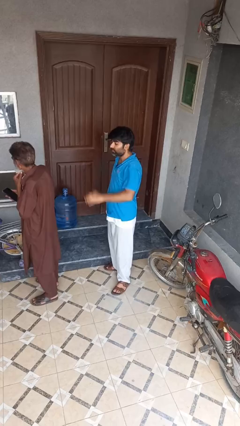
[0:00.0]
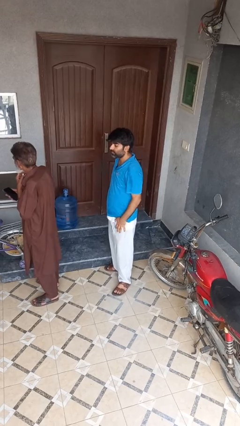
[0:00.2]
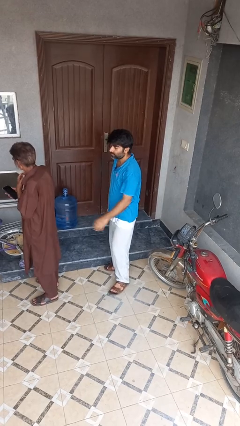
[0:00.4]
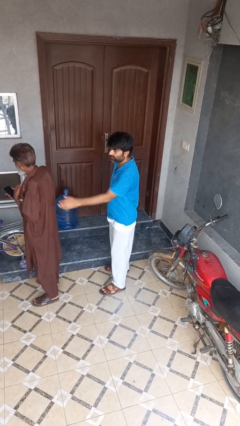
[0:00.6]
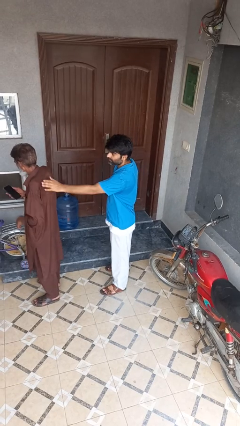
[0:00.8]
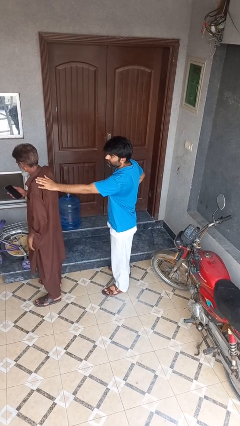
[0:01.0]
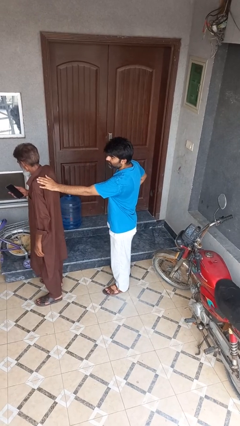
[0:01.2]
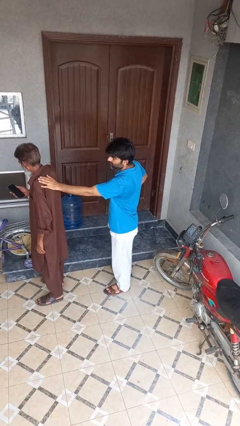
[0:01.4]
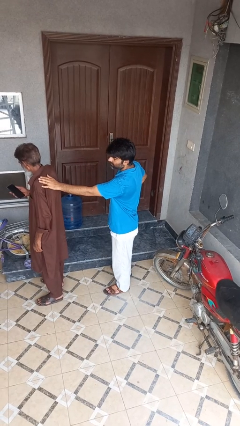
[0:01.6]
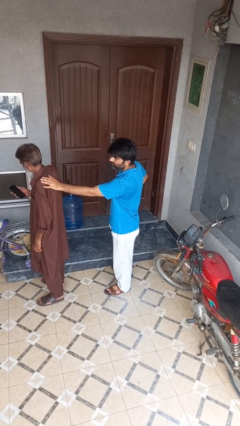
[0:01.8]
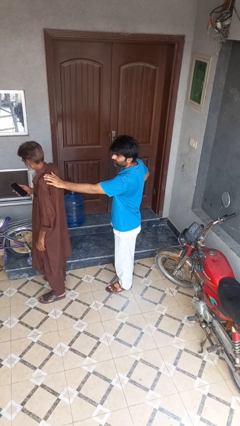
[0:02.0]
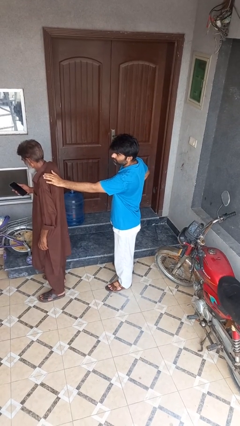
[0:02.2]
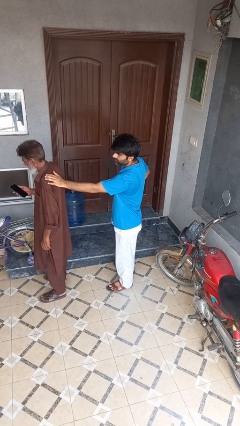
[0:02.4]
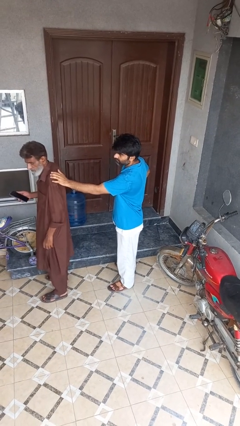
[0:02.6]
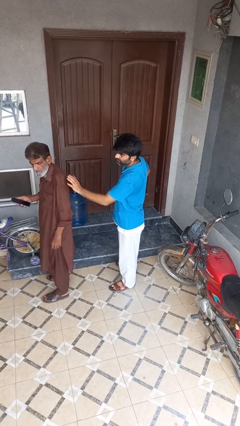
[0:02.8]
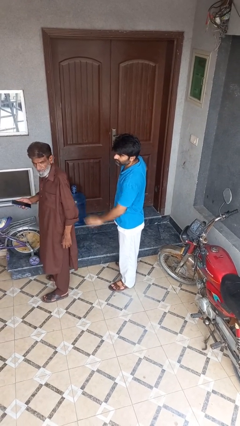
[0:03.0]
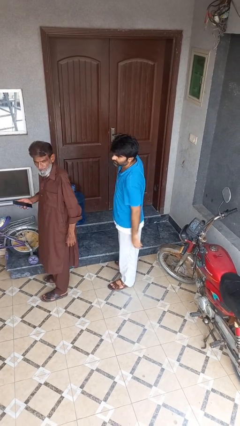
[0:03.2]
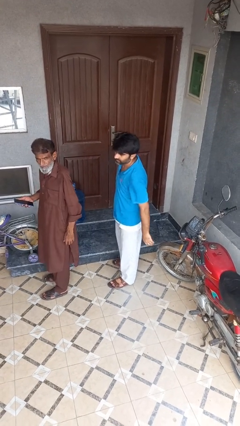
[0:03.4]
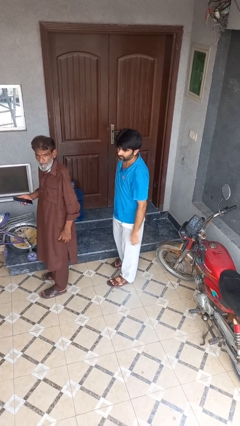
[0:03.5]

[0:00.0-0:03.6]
person touches back of person

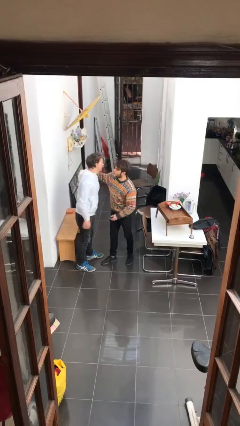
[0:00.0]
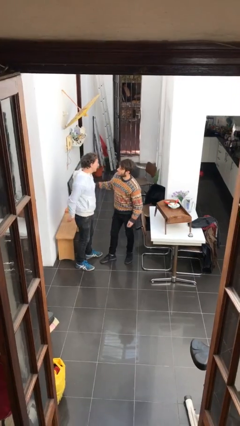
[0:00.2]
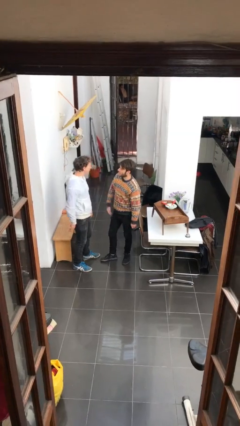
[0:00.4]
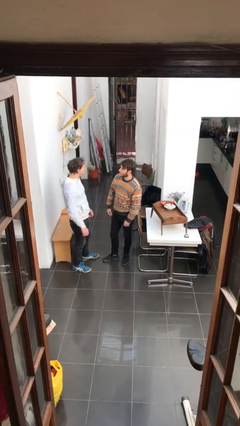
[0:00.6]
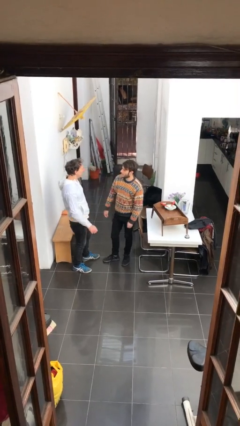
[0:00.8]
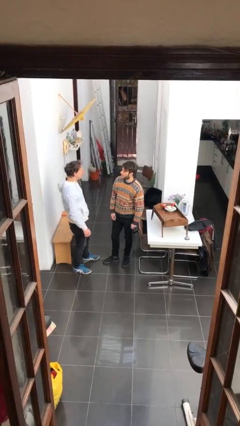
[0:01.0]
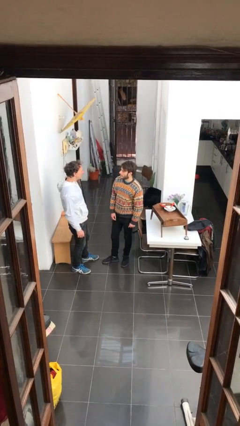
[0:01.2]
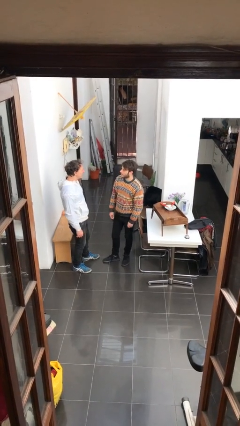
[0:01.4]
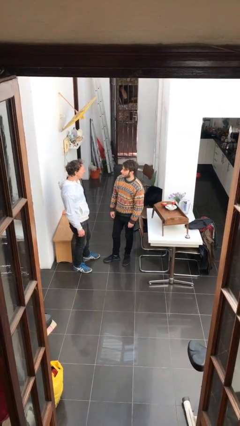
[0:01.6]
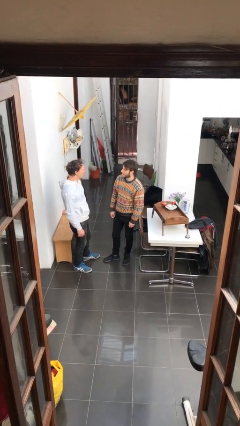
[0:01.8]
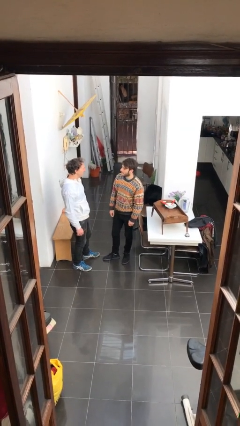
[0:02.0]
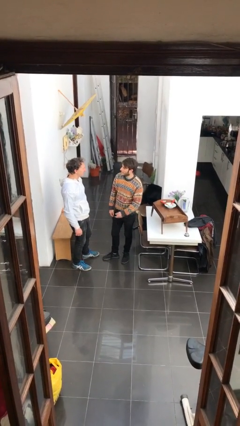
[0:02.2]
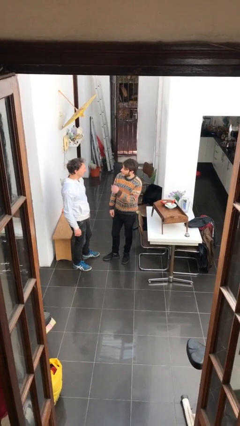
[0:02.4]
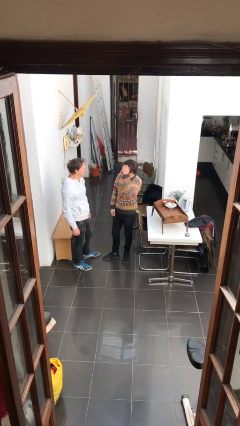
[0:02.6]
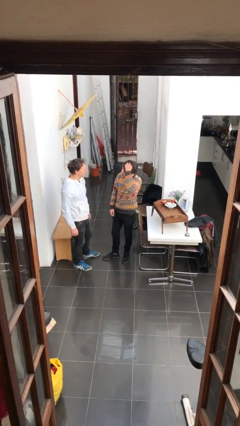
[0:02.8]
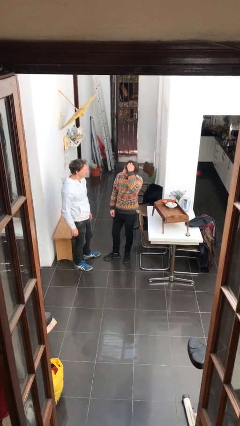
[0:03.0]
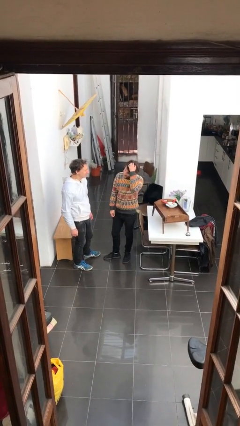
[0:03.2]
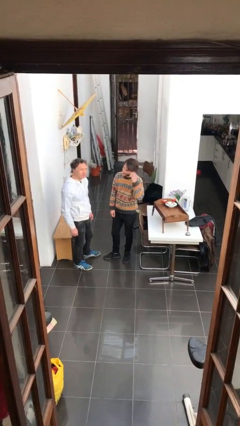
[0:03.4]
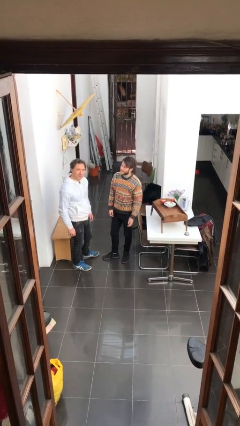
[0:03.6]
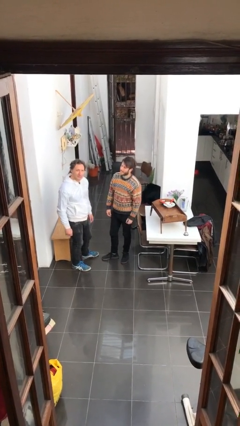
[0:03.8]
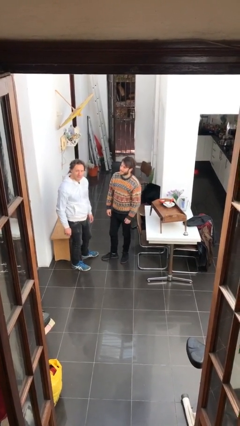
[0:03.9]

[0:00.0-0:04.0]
person talks to person

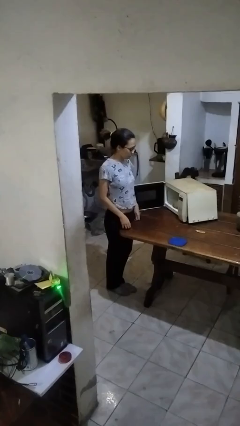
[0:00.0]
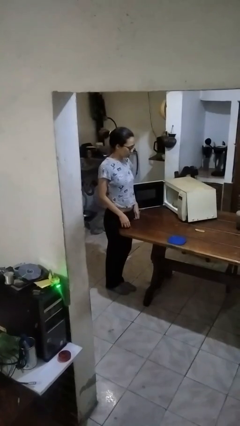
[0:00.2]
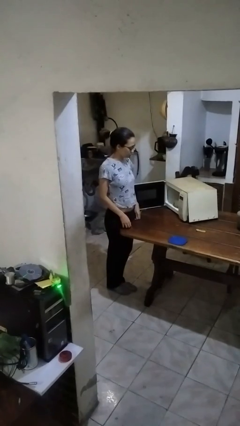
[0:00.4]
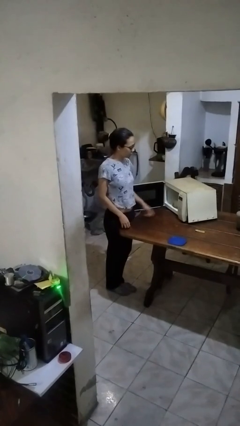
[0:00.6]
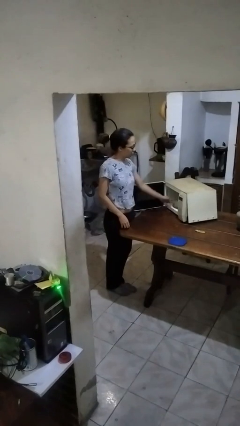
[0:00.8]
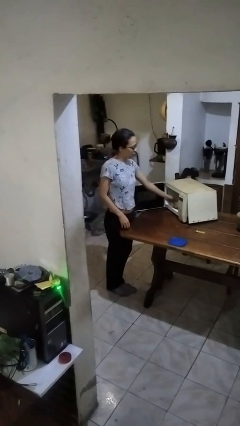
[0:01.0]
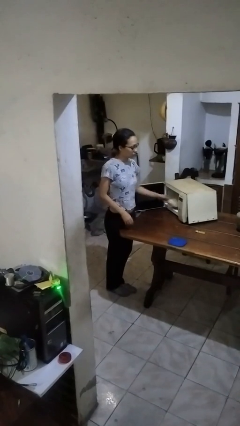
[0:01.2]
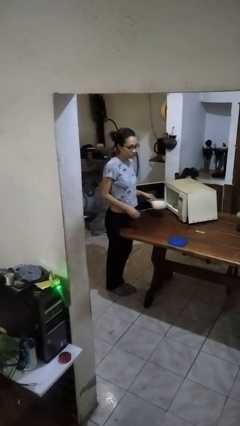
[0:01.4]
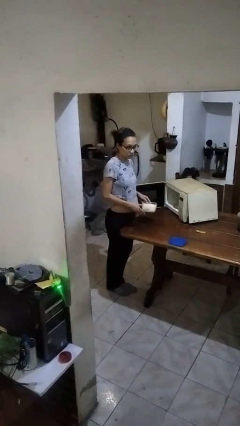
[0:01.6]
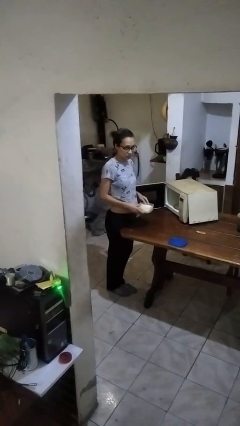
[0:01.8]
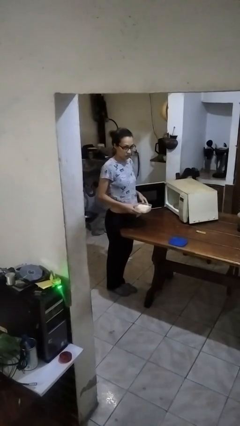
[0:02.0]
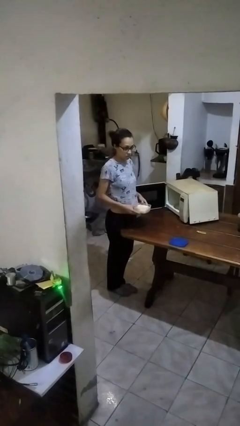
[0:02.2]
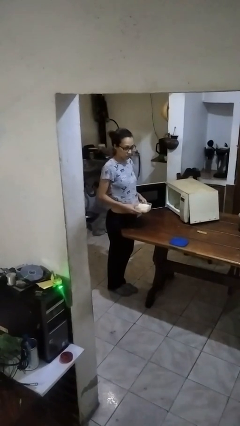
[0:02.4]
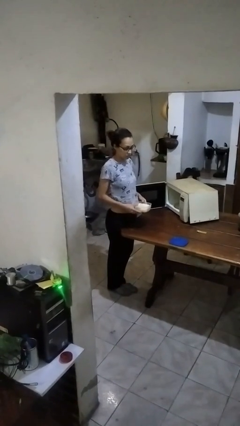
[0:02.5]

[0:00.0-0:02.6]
person takes object from microwave

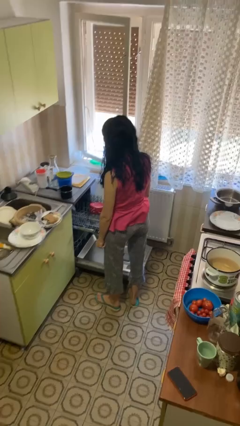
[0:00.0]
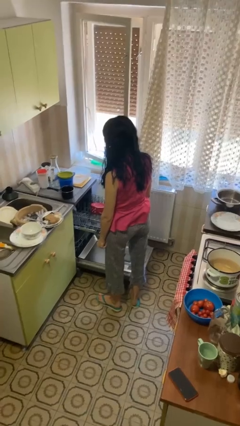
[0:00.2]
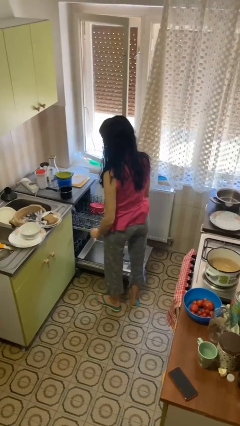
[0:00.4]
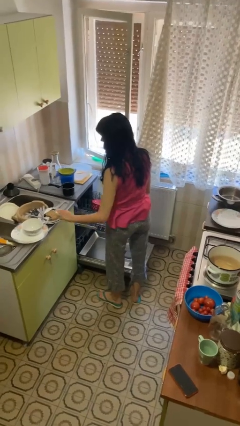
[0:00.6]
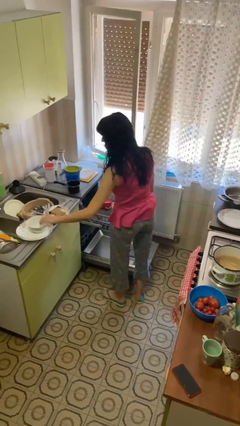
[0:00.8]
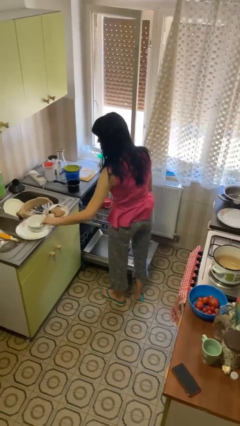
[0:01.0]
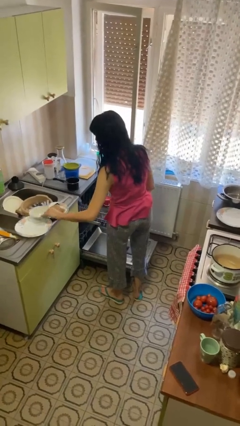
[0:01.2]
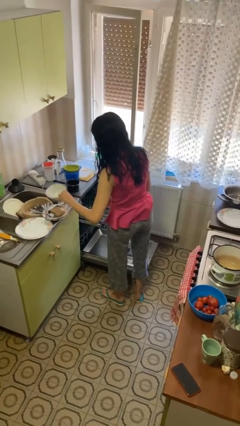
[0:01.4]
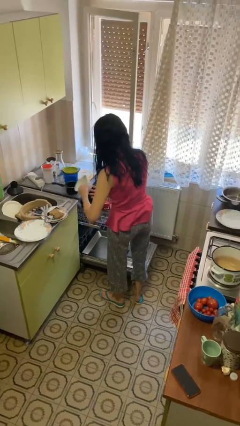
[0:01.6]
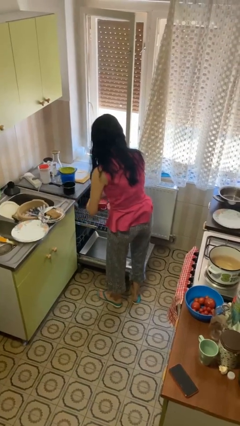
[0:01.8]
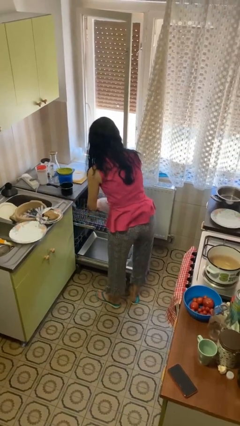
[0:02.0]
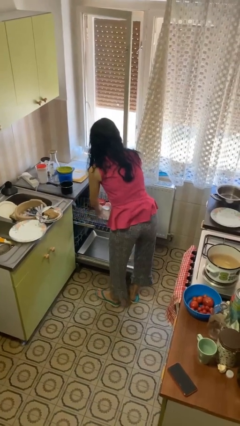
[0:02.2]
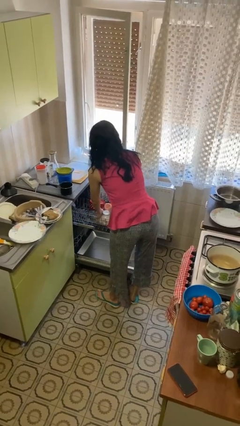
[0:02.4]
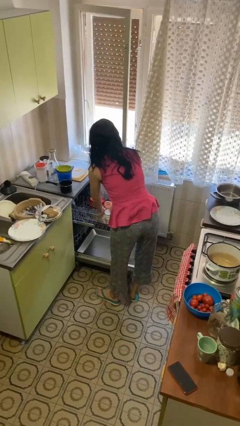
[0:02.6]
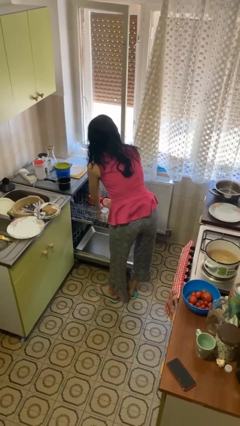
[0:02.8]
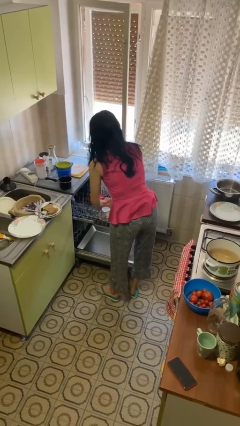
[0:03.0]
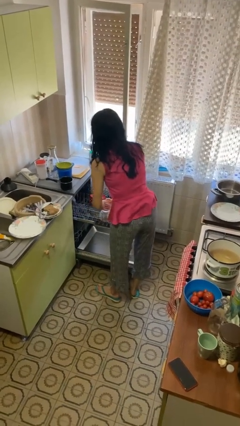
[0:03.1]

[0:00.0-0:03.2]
person loads dishwasher

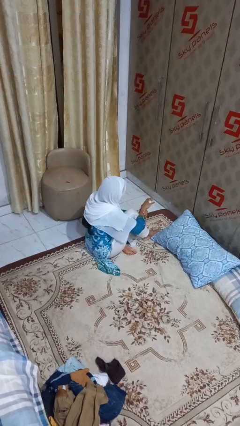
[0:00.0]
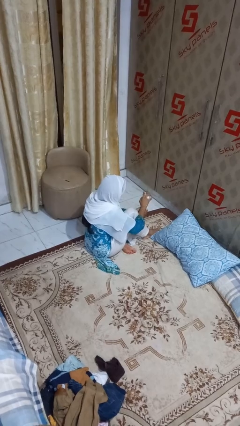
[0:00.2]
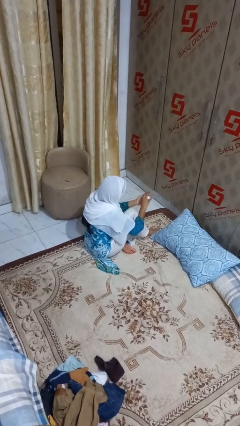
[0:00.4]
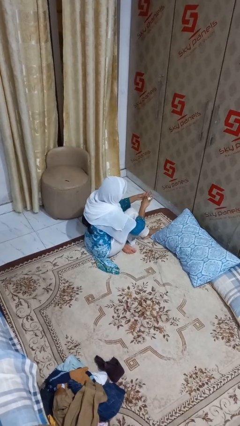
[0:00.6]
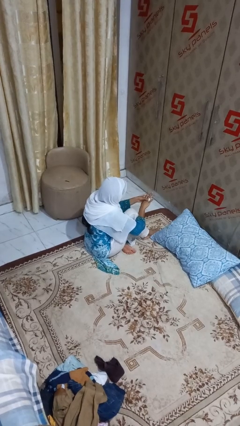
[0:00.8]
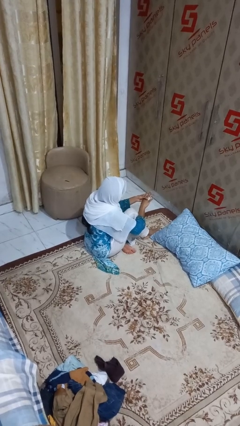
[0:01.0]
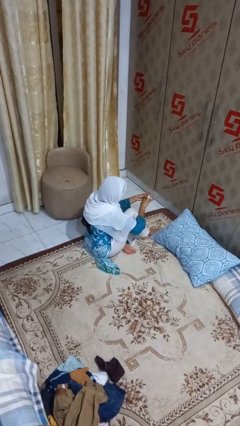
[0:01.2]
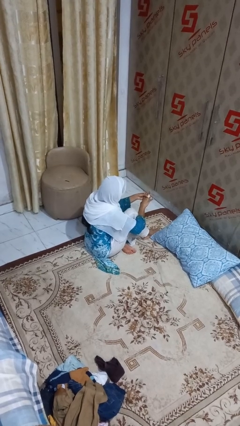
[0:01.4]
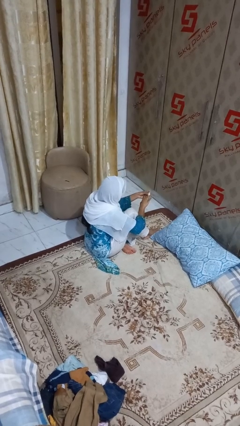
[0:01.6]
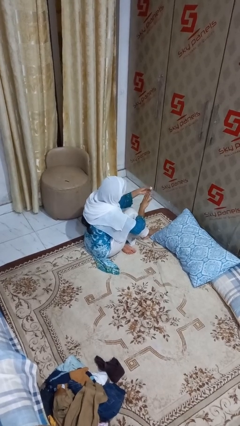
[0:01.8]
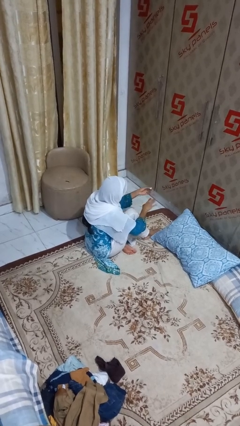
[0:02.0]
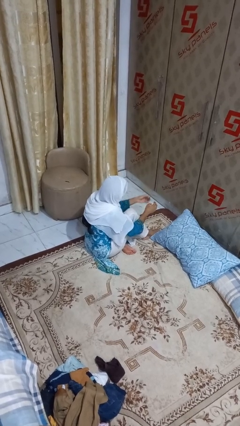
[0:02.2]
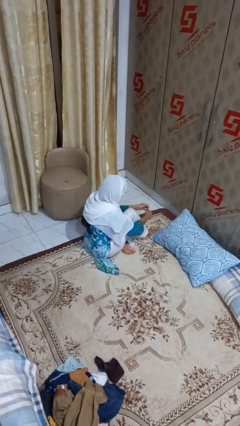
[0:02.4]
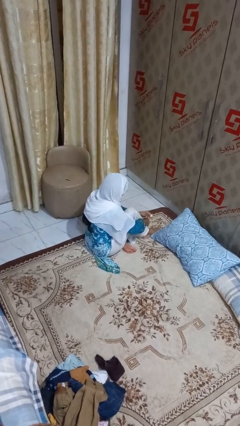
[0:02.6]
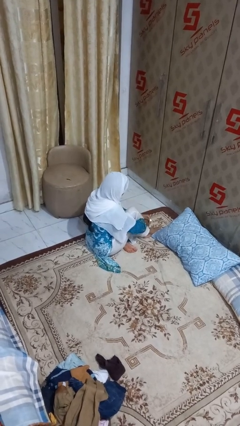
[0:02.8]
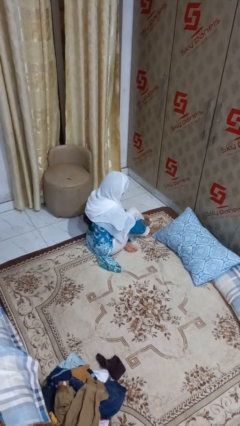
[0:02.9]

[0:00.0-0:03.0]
person takes off ring

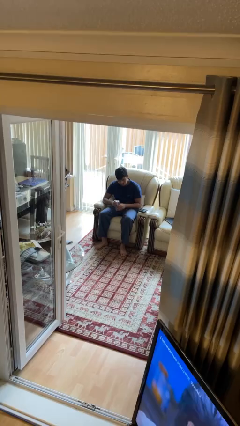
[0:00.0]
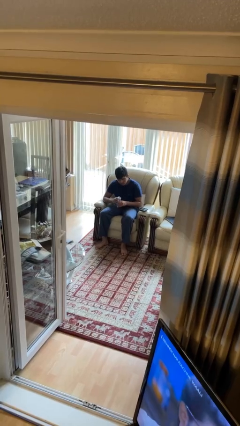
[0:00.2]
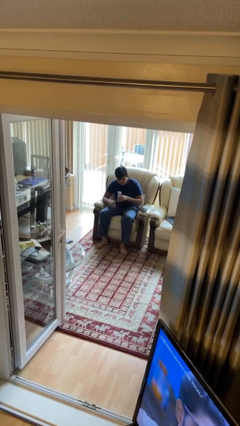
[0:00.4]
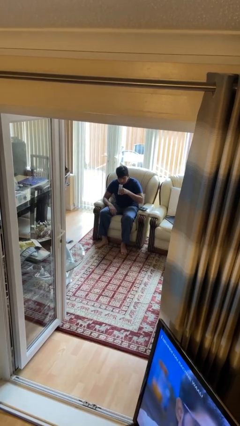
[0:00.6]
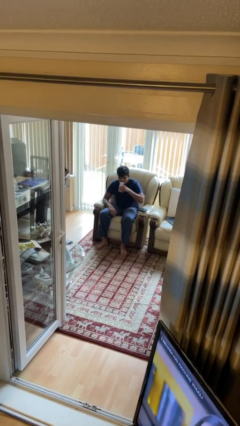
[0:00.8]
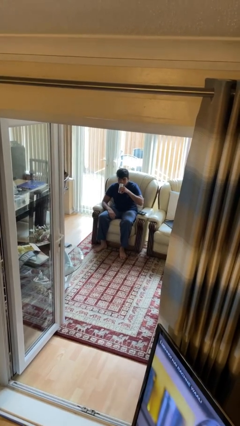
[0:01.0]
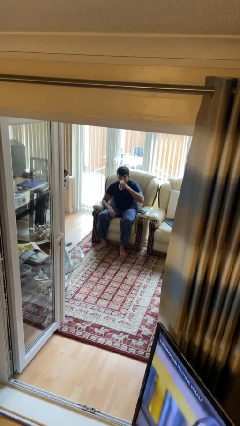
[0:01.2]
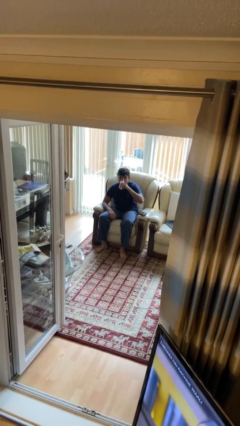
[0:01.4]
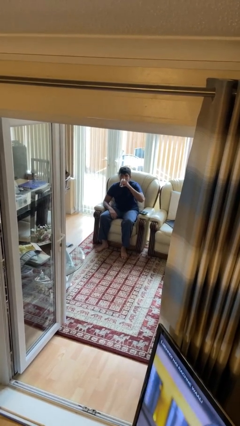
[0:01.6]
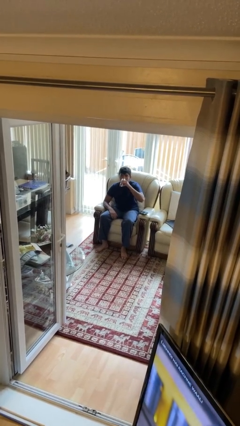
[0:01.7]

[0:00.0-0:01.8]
person drinks from beverage can
